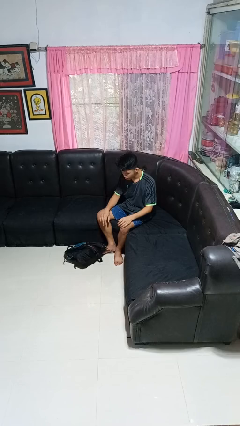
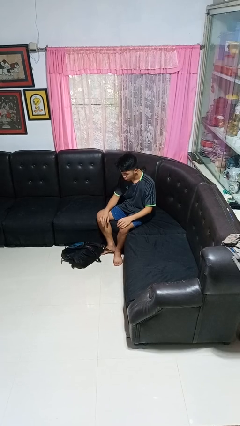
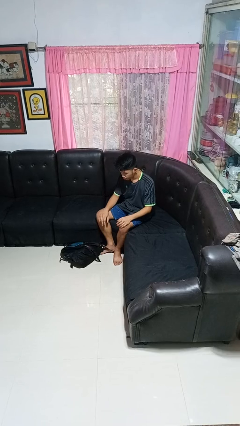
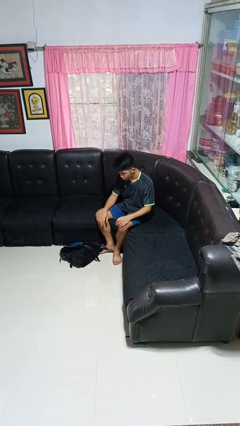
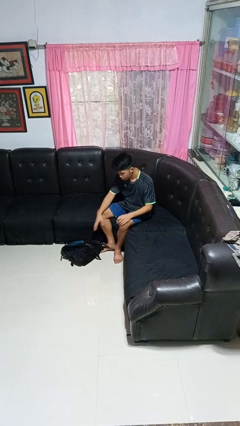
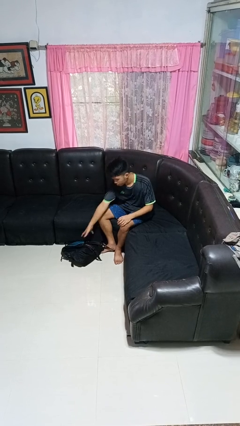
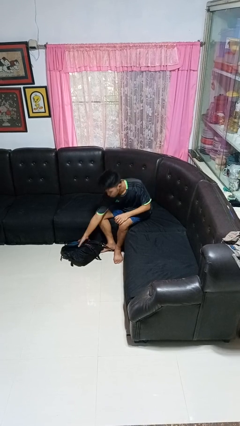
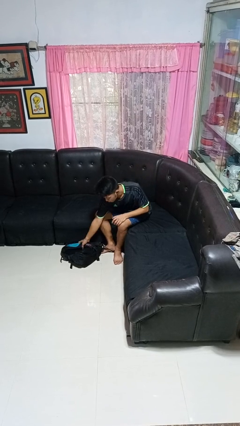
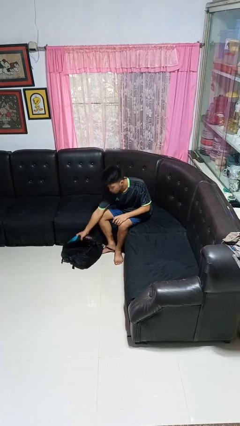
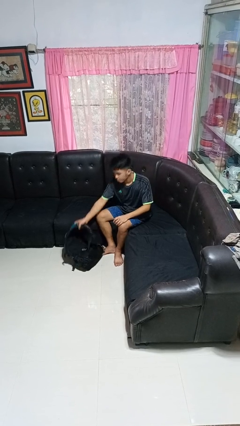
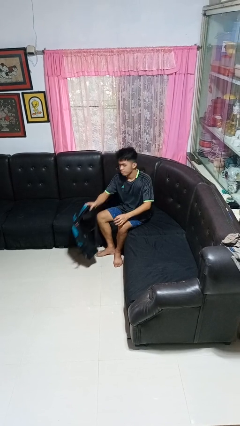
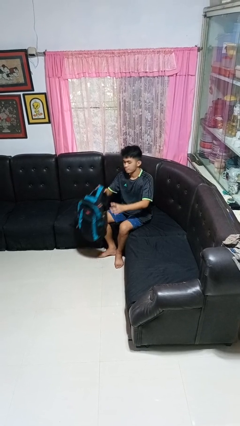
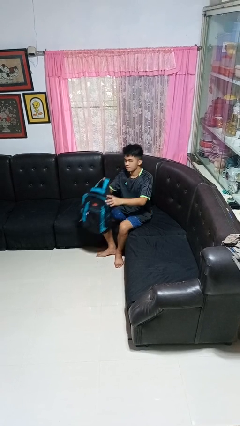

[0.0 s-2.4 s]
person picks up object from floor

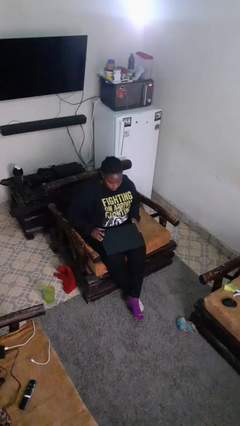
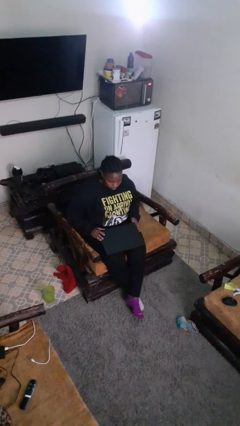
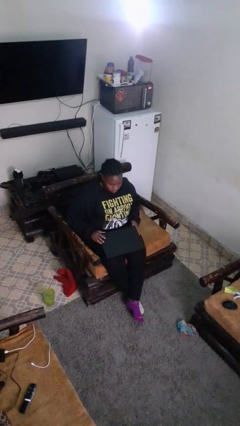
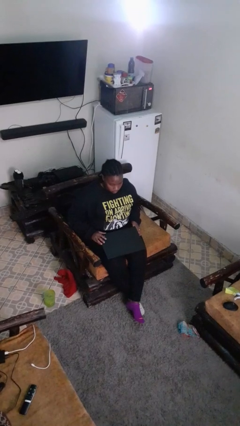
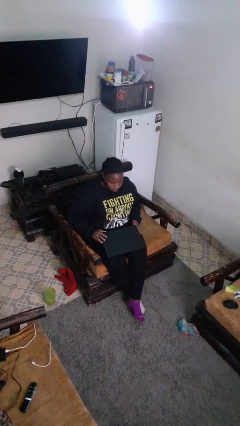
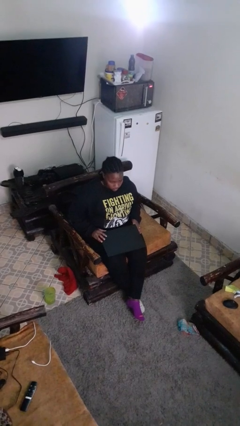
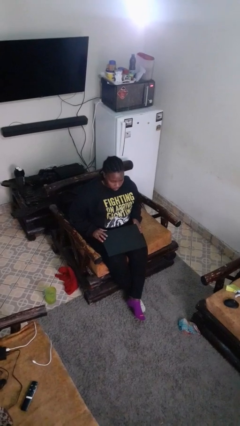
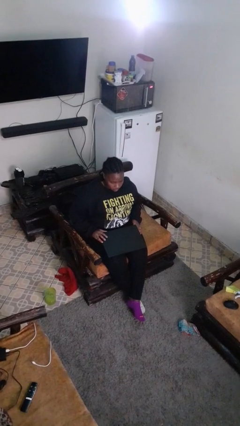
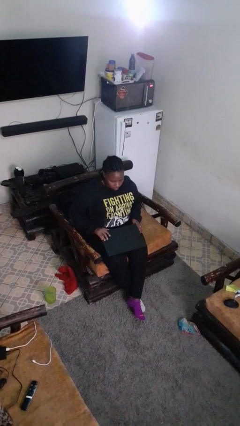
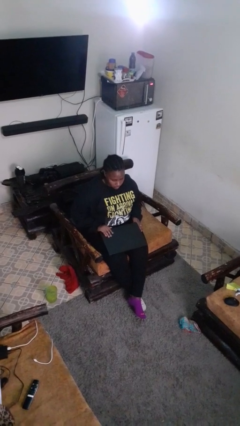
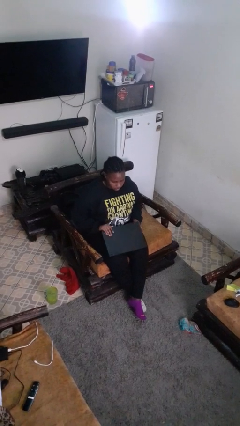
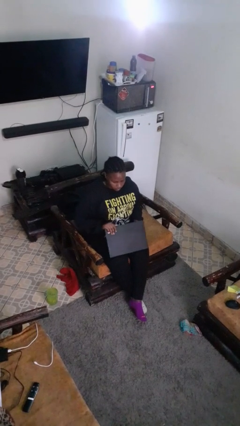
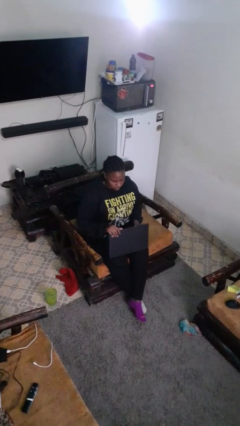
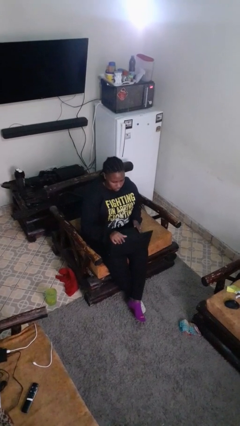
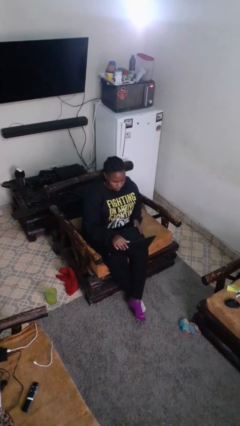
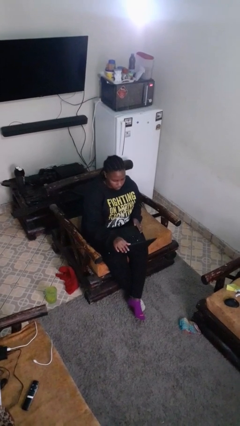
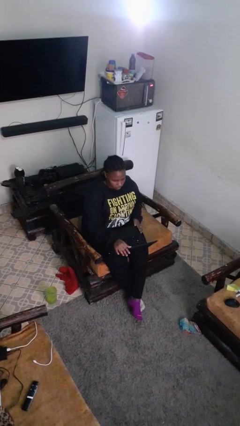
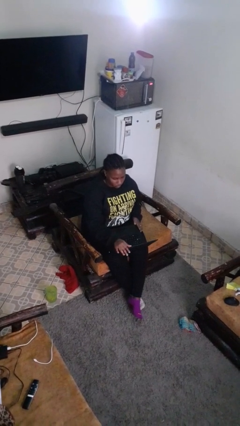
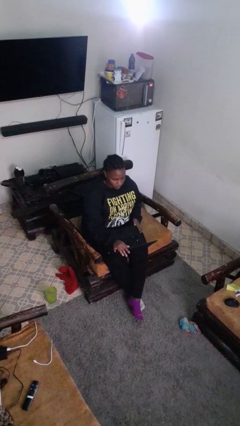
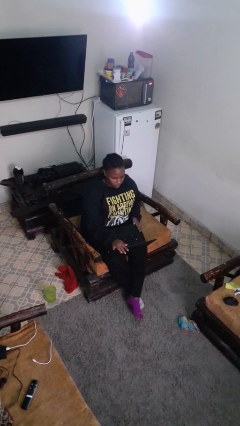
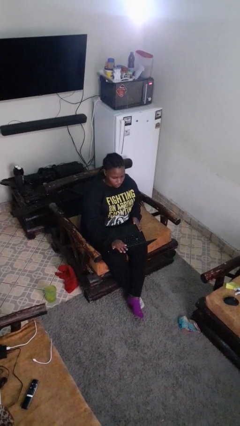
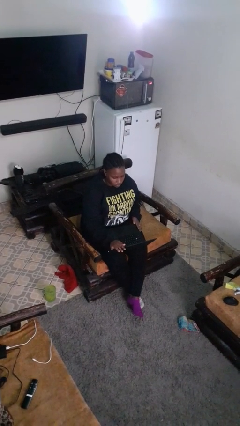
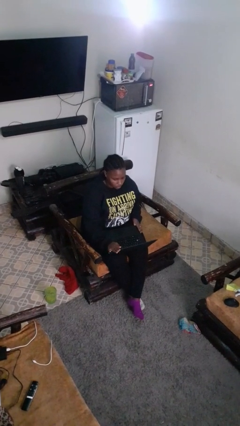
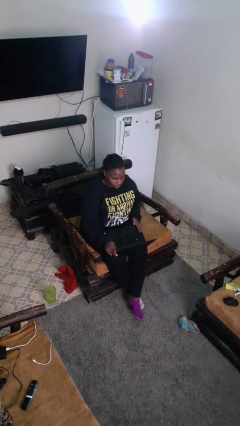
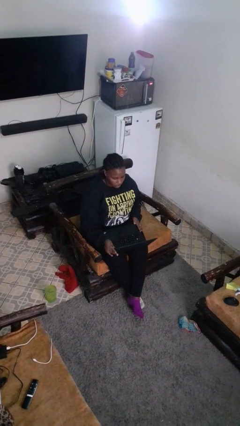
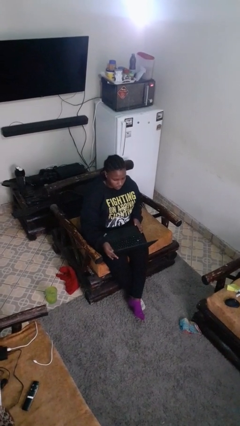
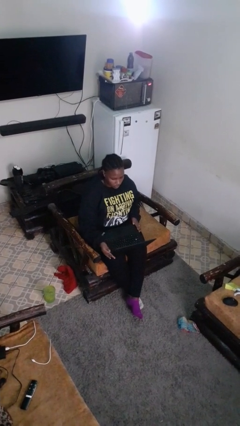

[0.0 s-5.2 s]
person opens laptop

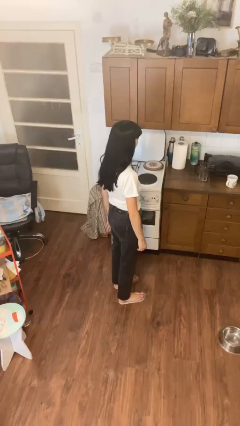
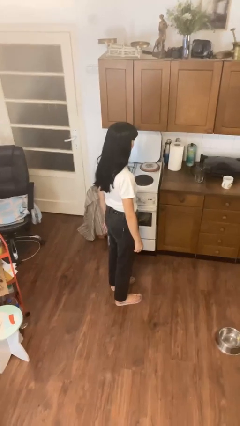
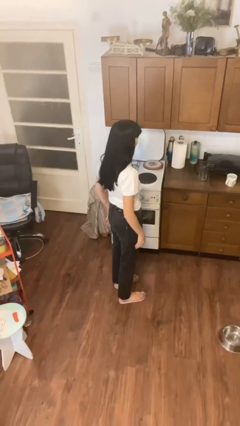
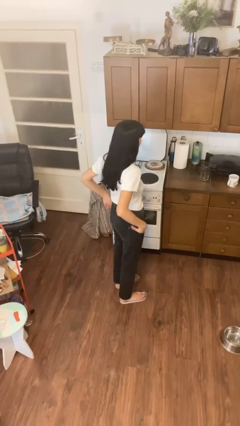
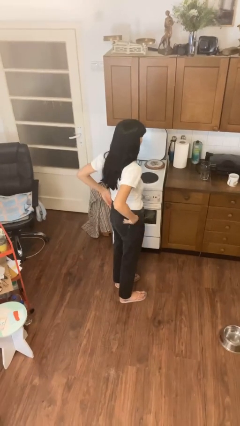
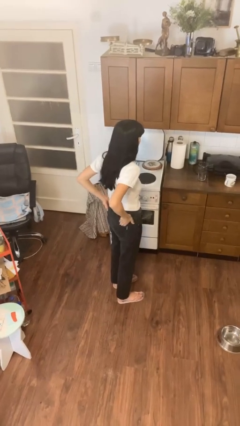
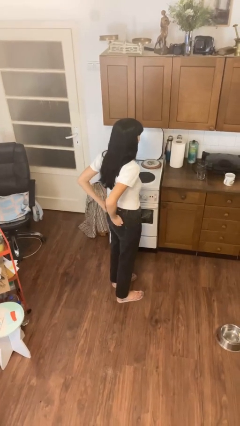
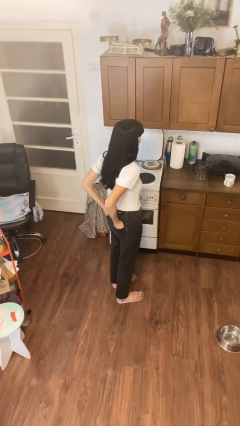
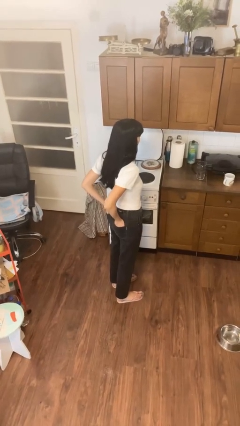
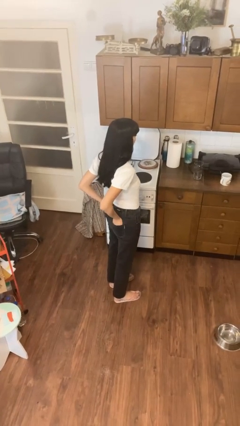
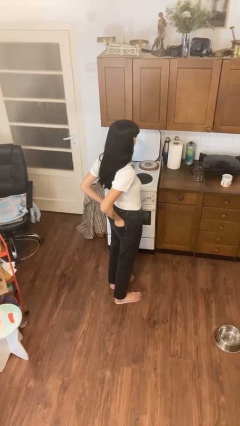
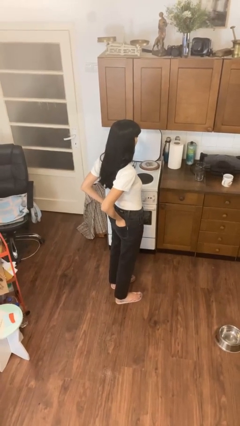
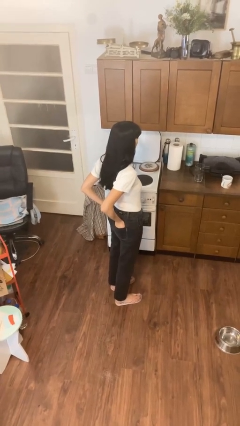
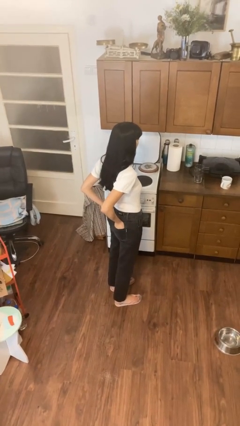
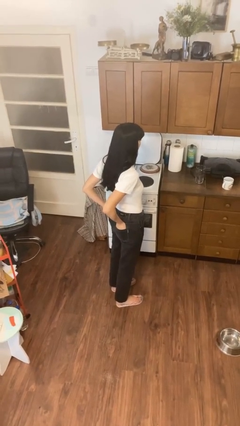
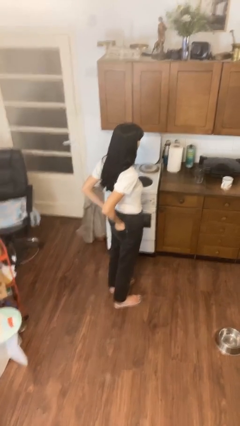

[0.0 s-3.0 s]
person puts hands in back pockets

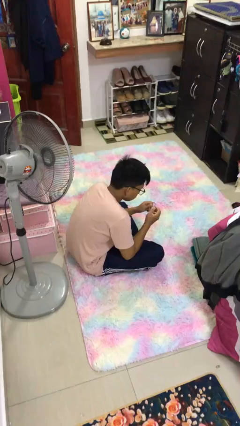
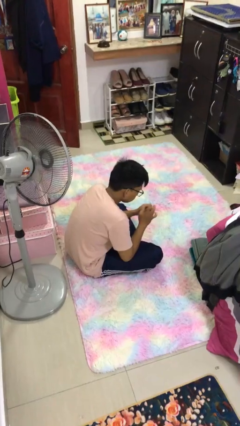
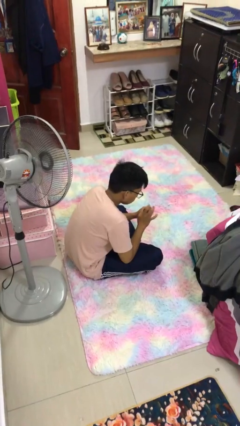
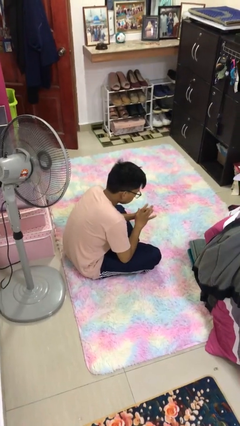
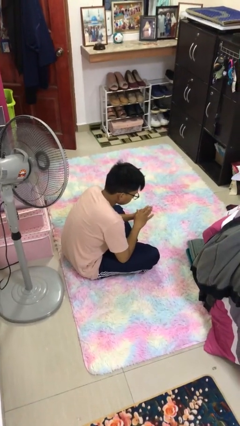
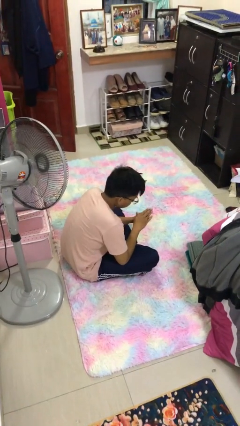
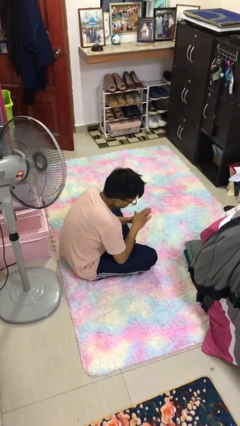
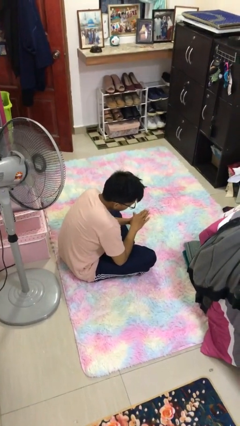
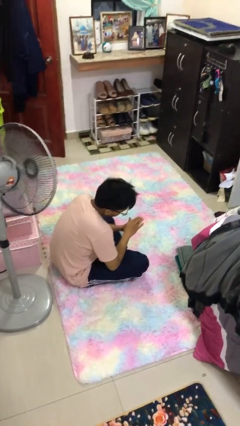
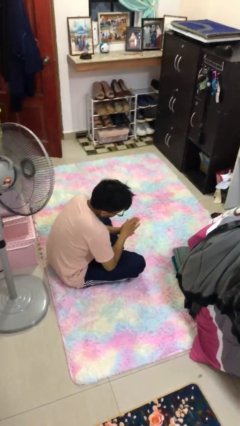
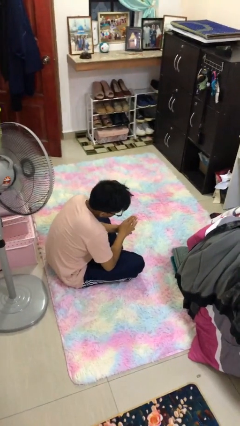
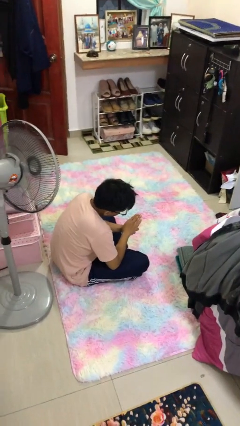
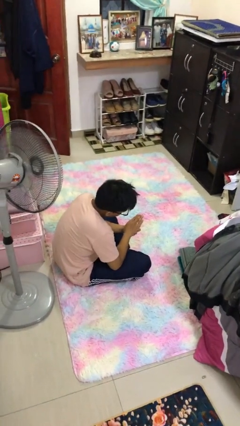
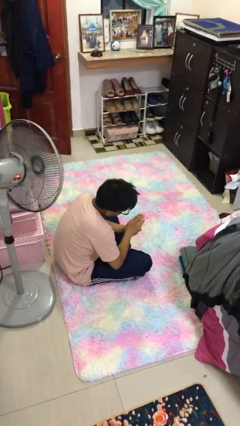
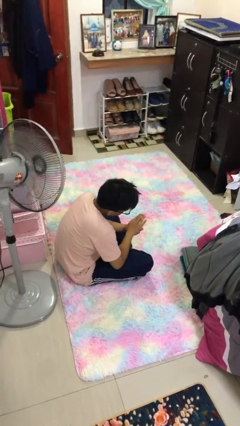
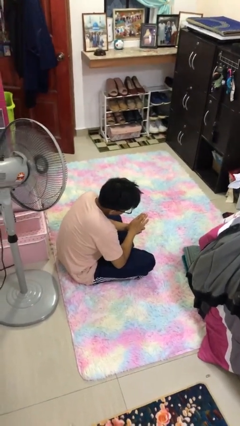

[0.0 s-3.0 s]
person puts on ring

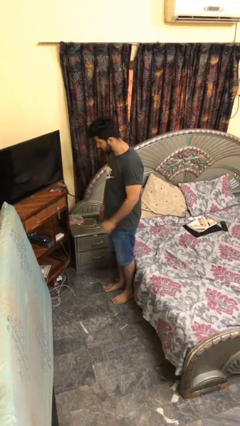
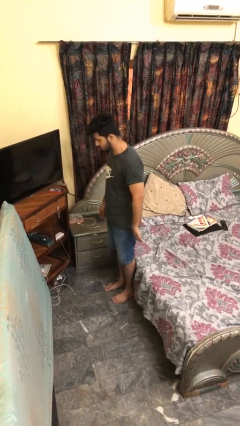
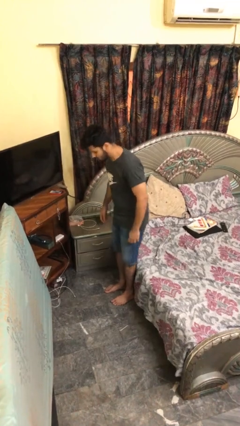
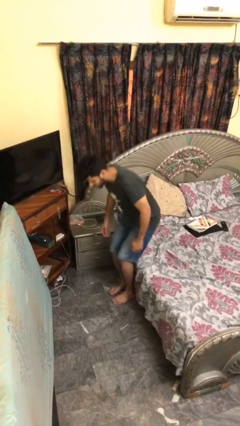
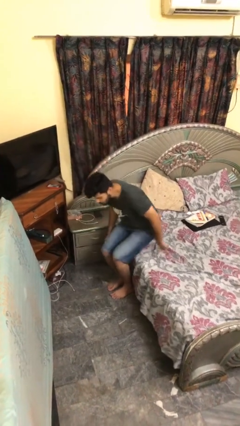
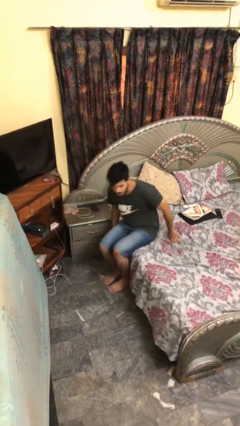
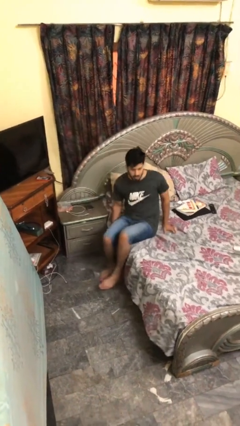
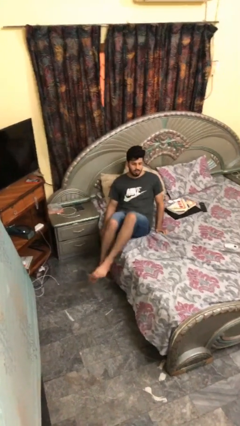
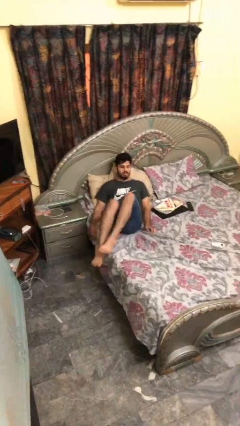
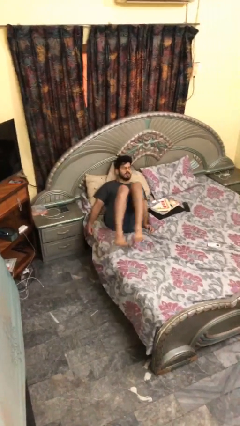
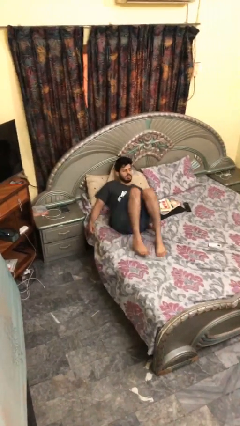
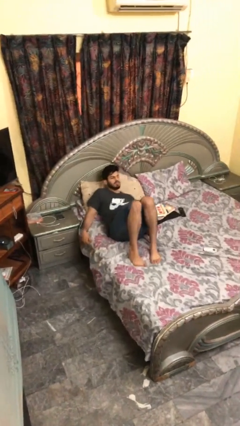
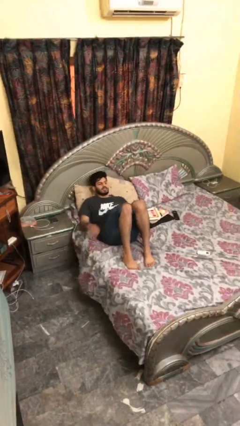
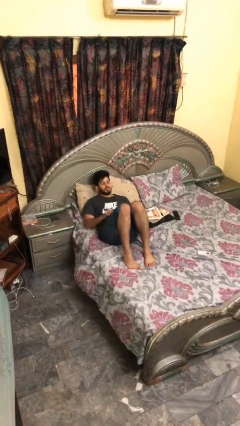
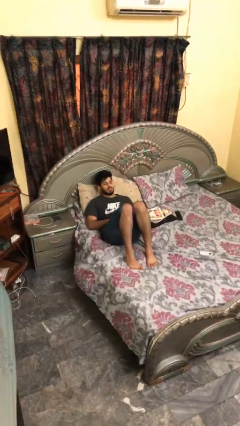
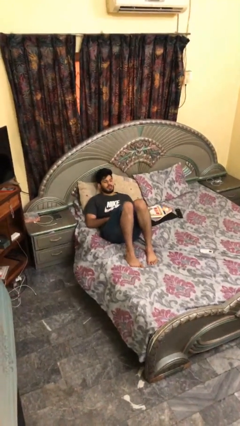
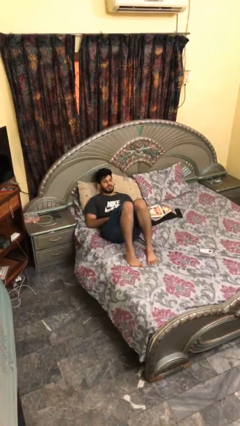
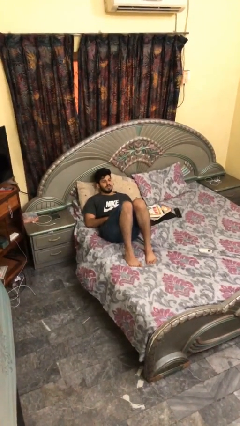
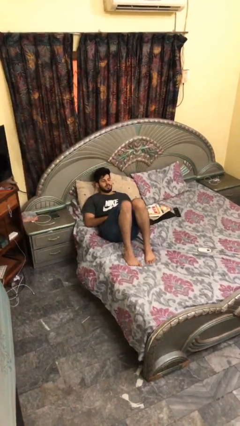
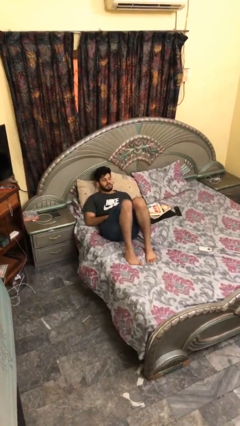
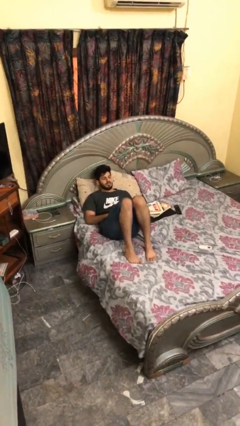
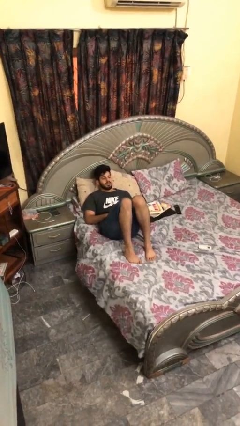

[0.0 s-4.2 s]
person lies down on bed
